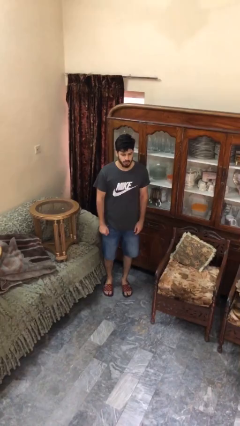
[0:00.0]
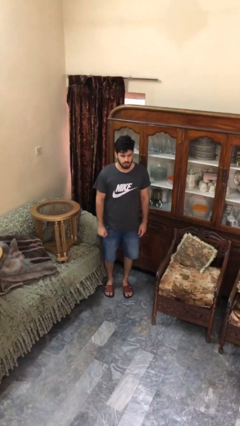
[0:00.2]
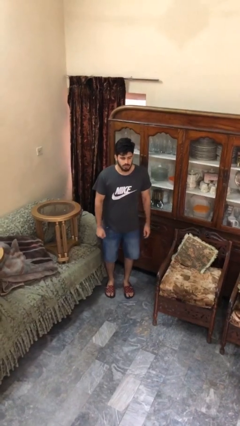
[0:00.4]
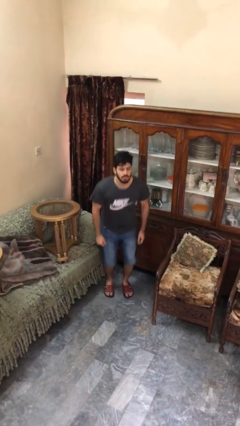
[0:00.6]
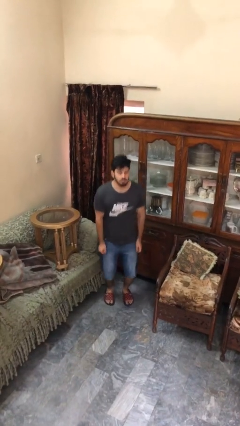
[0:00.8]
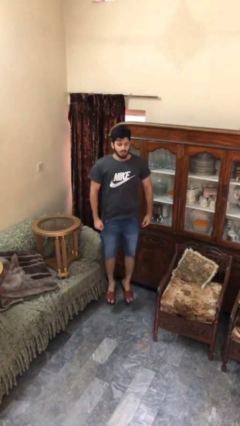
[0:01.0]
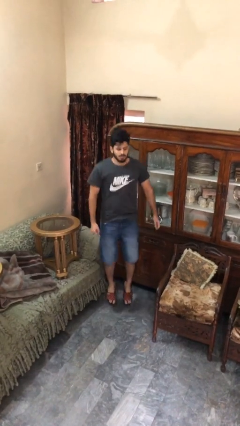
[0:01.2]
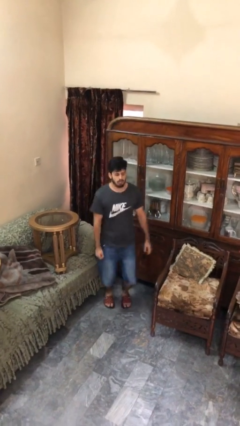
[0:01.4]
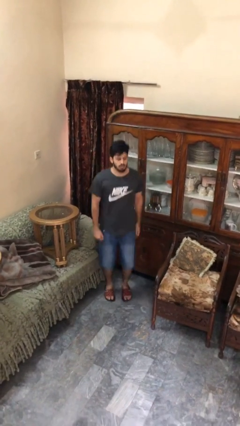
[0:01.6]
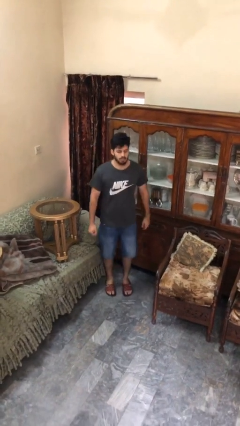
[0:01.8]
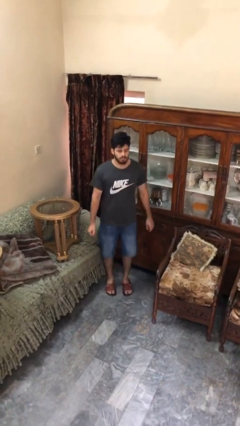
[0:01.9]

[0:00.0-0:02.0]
person jumps

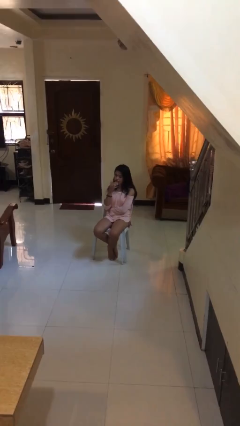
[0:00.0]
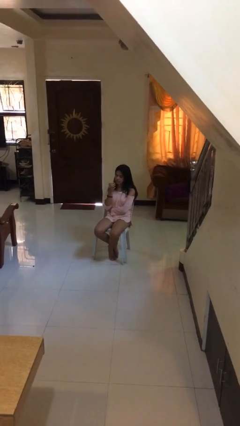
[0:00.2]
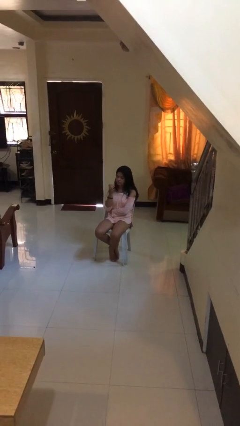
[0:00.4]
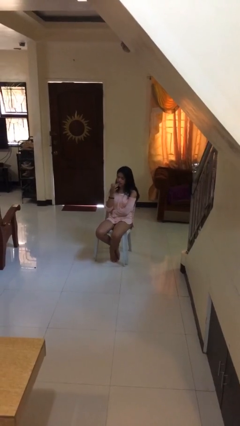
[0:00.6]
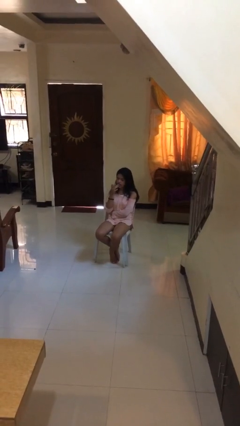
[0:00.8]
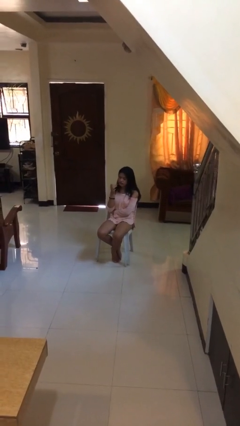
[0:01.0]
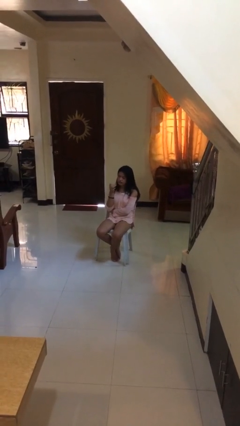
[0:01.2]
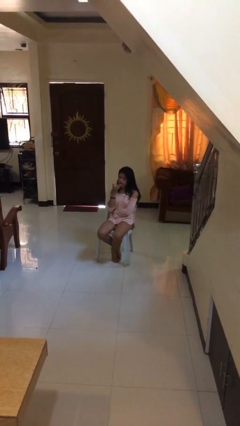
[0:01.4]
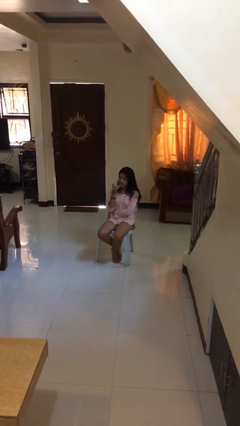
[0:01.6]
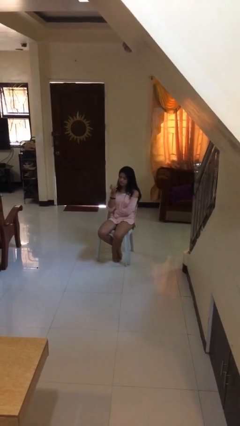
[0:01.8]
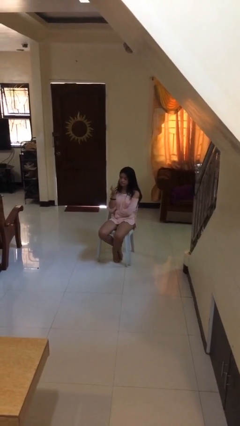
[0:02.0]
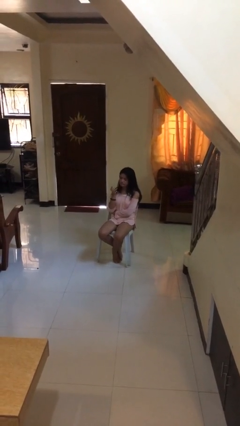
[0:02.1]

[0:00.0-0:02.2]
person licks fingers

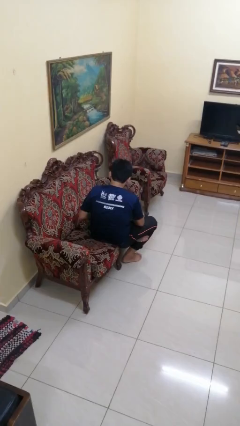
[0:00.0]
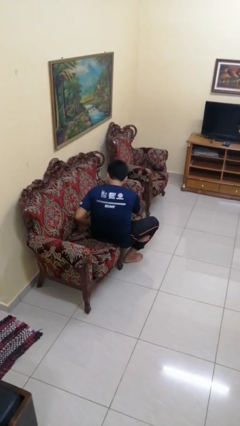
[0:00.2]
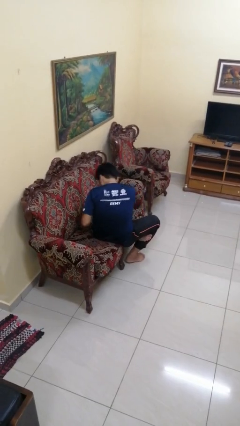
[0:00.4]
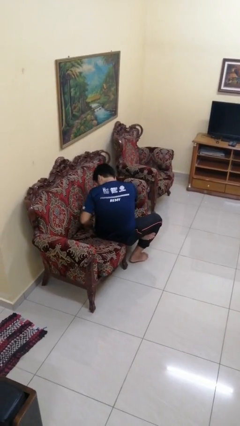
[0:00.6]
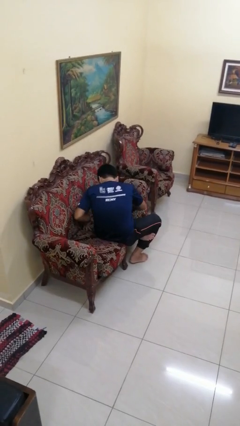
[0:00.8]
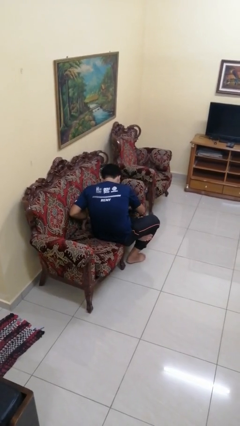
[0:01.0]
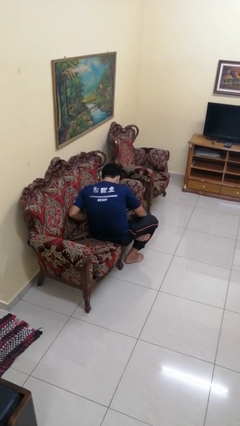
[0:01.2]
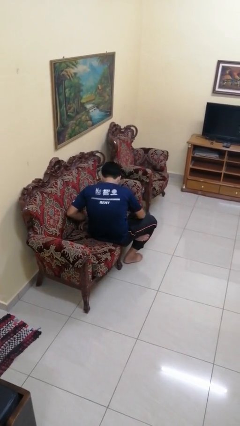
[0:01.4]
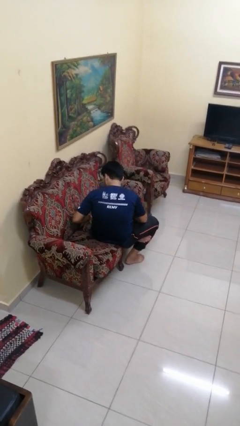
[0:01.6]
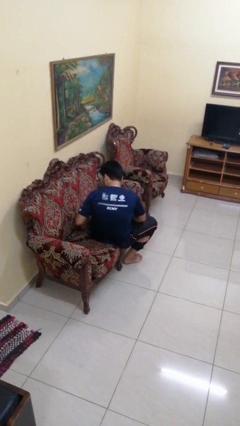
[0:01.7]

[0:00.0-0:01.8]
person searches in couch

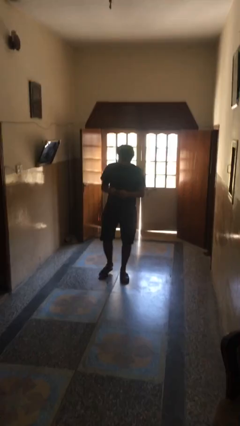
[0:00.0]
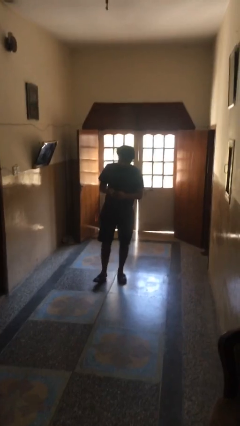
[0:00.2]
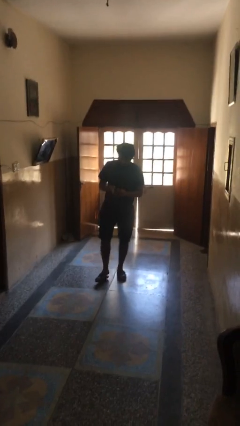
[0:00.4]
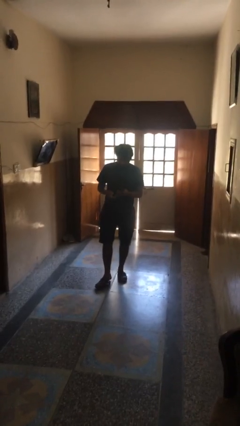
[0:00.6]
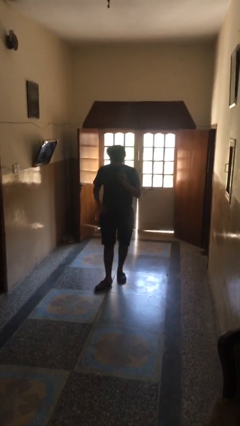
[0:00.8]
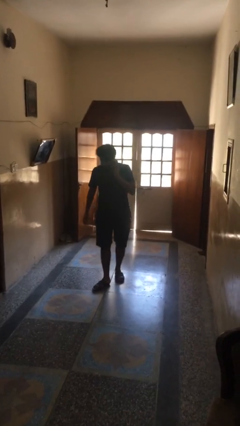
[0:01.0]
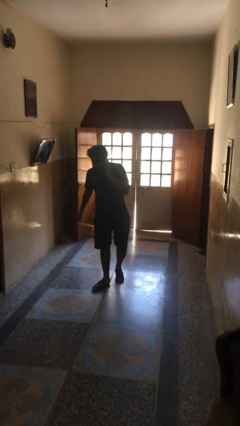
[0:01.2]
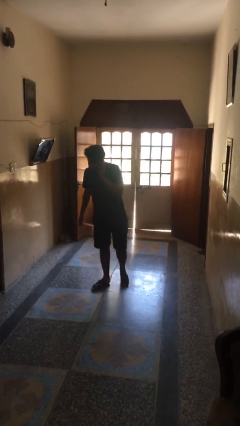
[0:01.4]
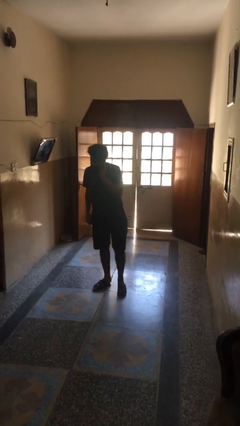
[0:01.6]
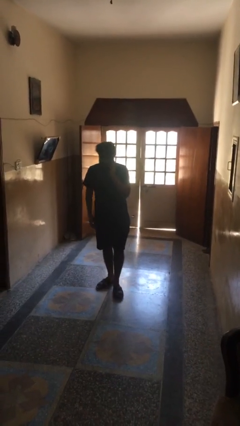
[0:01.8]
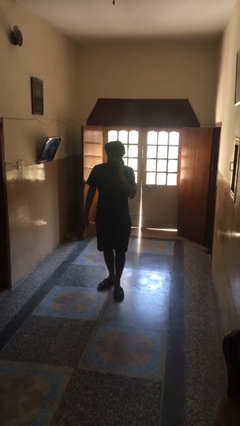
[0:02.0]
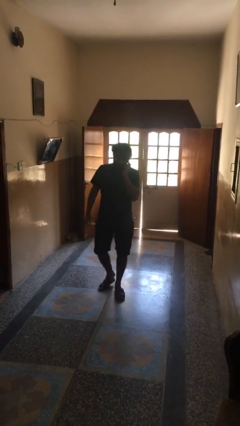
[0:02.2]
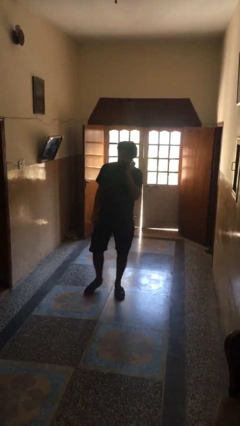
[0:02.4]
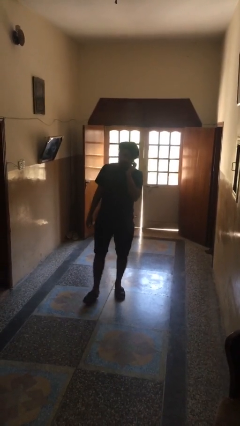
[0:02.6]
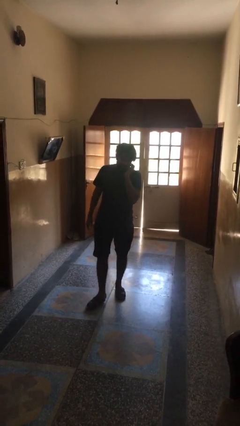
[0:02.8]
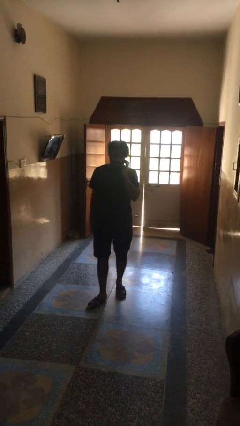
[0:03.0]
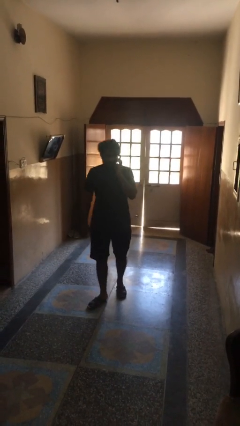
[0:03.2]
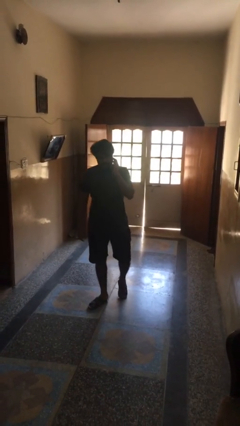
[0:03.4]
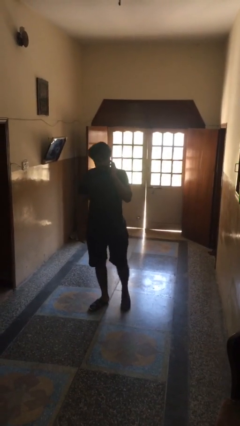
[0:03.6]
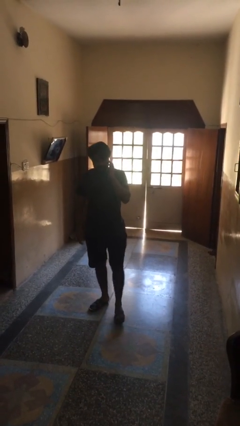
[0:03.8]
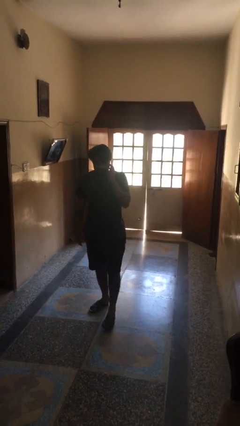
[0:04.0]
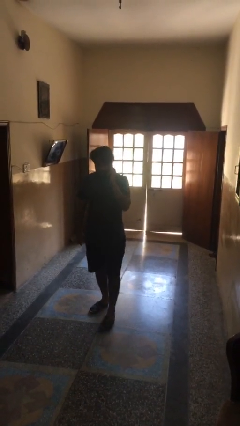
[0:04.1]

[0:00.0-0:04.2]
person talks on phone

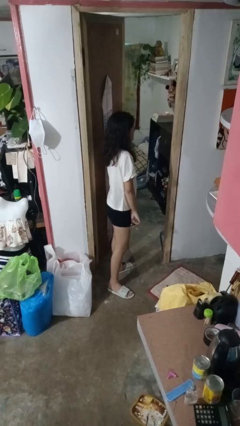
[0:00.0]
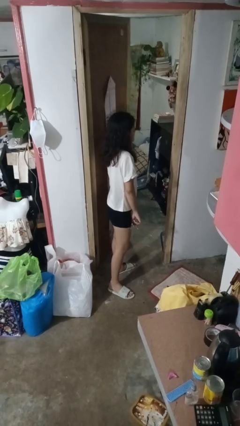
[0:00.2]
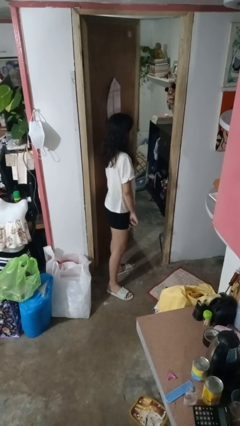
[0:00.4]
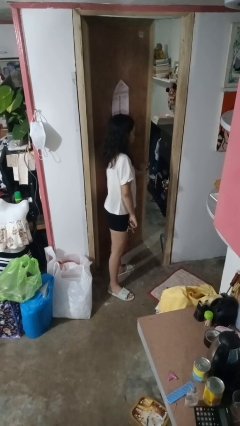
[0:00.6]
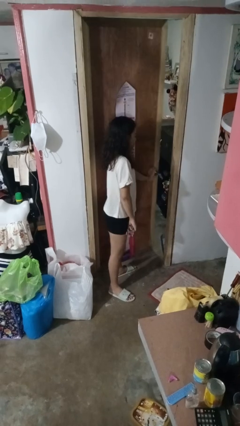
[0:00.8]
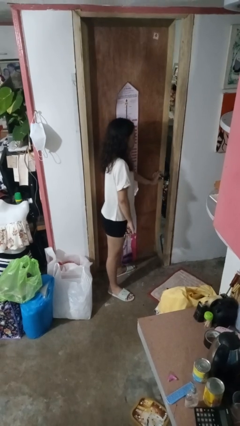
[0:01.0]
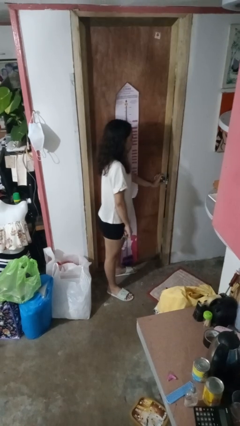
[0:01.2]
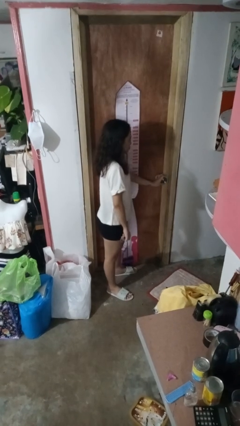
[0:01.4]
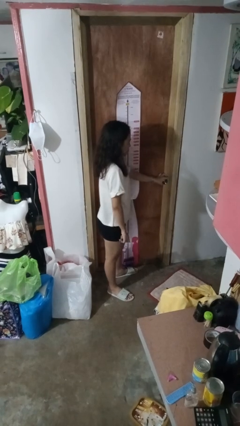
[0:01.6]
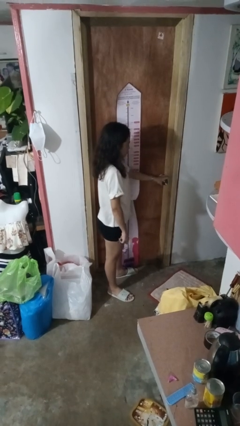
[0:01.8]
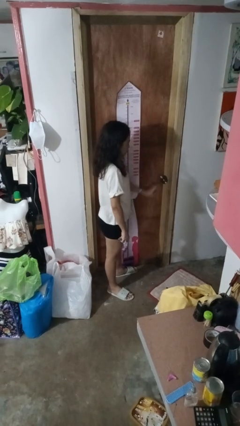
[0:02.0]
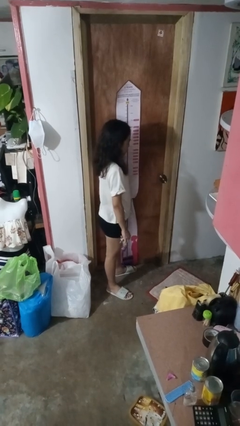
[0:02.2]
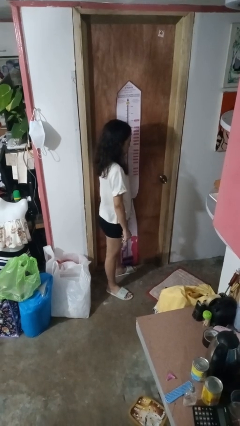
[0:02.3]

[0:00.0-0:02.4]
person closes facility door

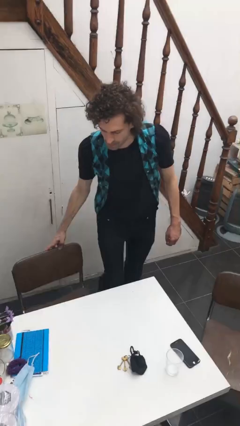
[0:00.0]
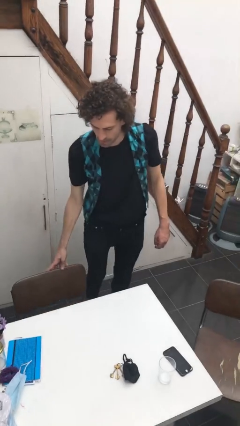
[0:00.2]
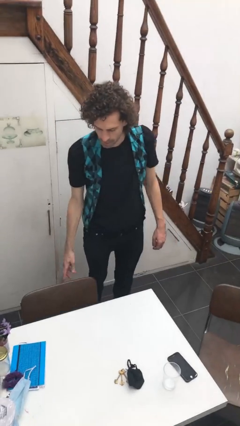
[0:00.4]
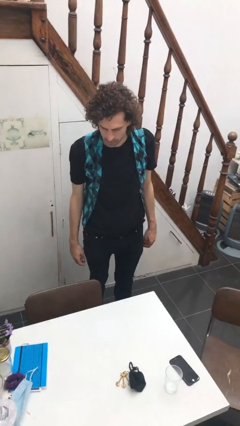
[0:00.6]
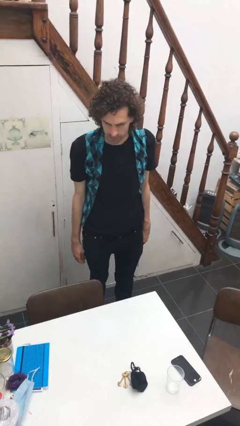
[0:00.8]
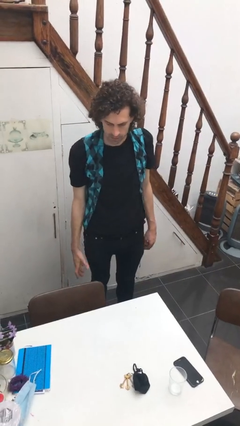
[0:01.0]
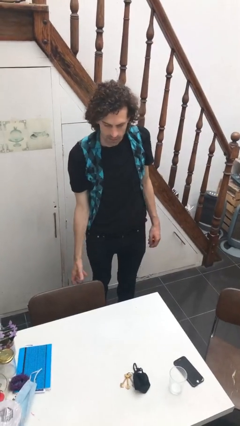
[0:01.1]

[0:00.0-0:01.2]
person stands up

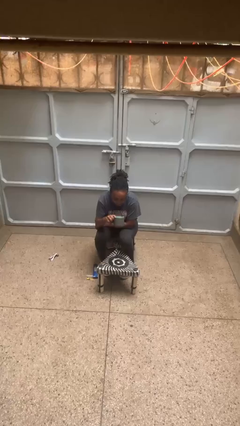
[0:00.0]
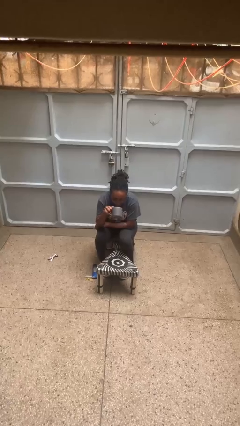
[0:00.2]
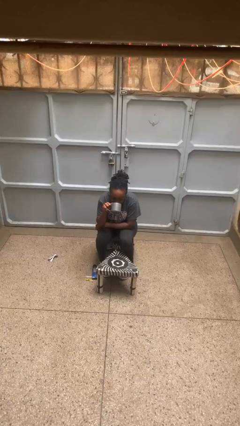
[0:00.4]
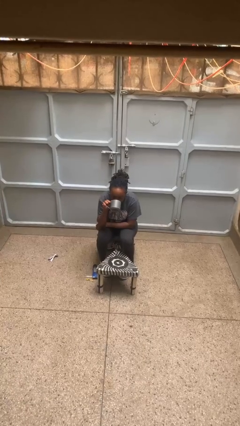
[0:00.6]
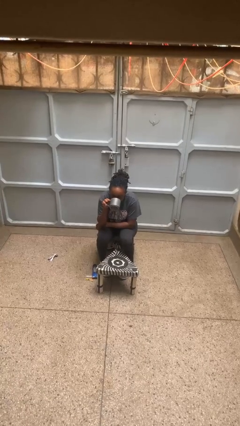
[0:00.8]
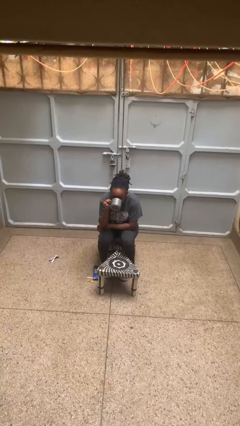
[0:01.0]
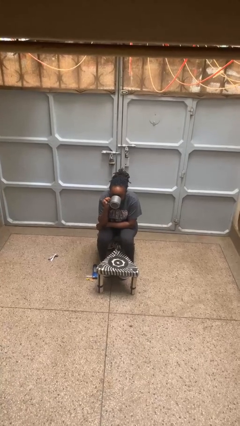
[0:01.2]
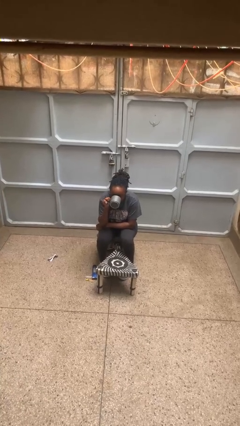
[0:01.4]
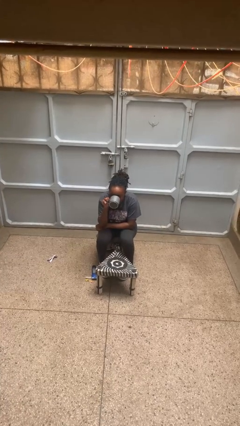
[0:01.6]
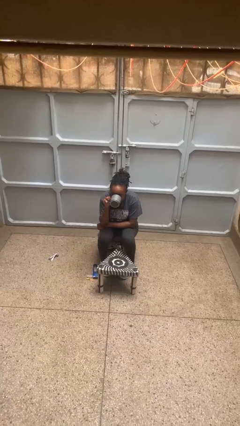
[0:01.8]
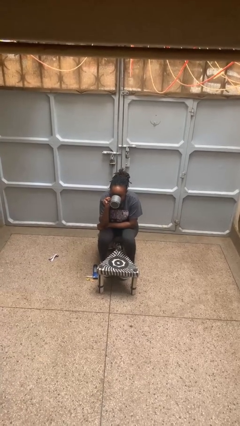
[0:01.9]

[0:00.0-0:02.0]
person drinks from mug

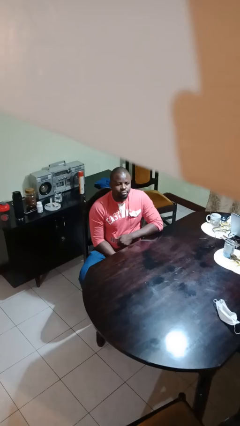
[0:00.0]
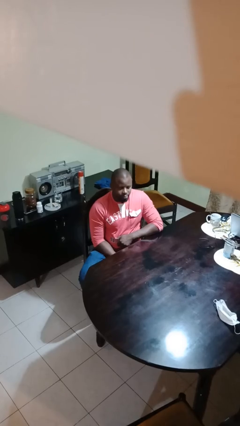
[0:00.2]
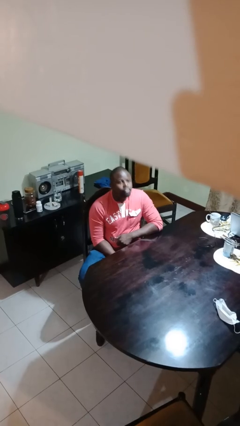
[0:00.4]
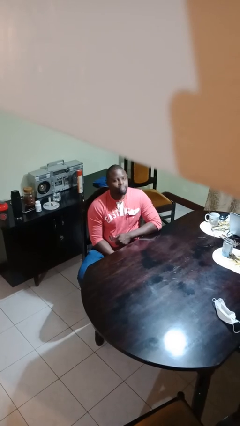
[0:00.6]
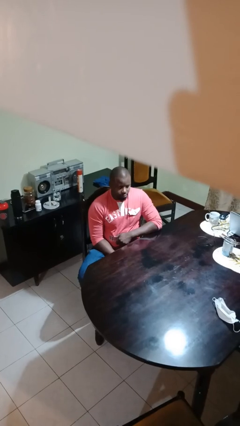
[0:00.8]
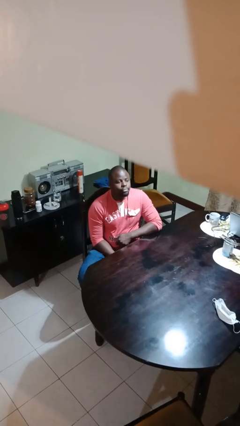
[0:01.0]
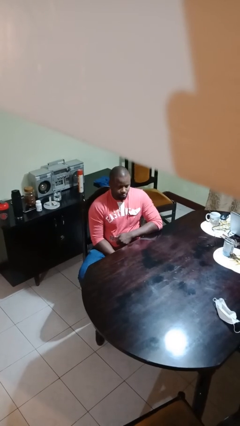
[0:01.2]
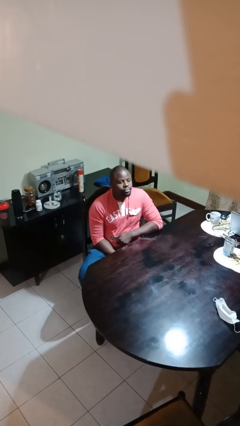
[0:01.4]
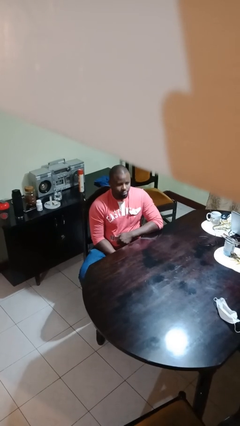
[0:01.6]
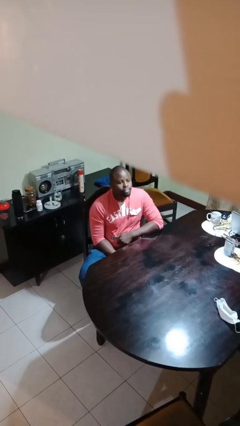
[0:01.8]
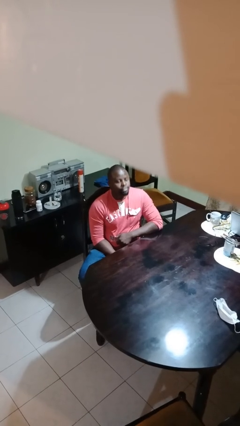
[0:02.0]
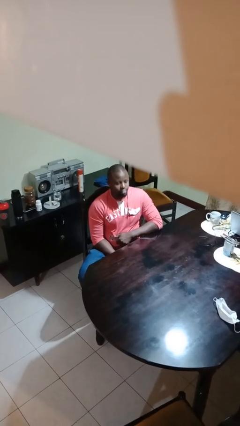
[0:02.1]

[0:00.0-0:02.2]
person shakes head
